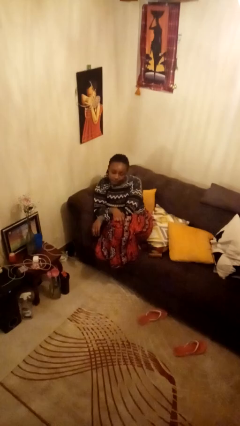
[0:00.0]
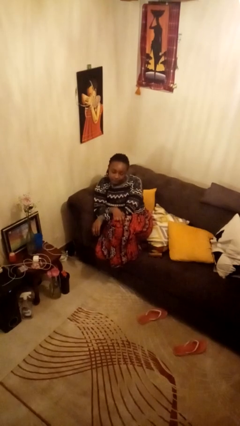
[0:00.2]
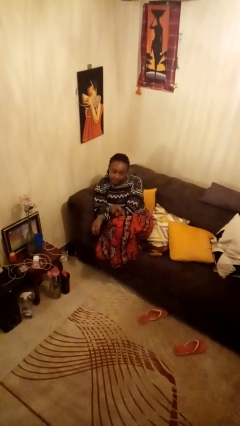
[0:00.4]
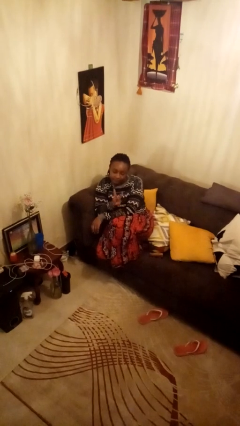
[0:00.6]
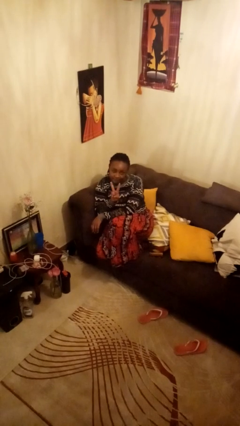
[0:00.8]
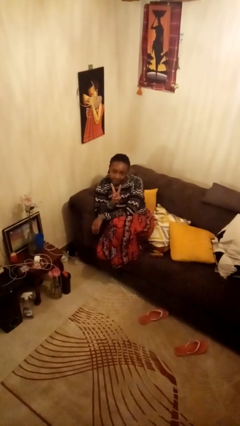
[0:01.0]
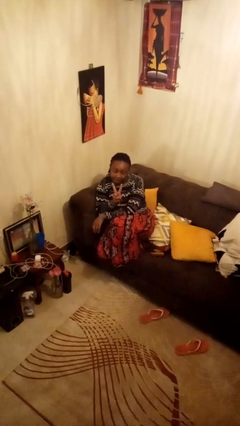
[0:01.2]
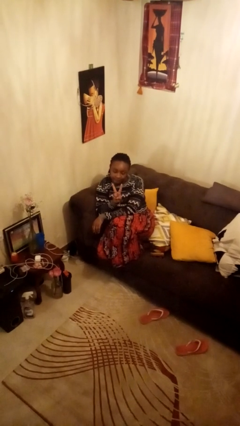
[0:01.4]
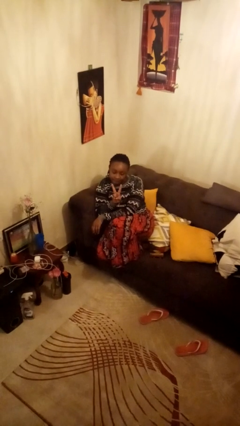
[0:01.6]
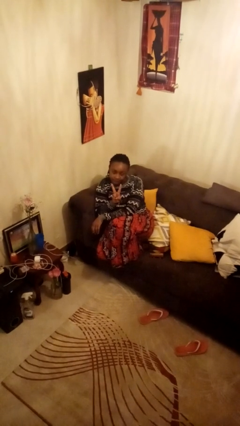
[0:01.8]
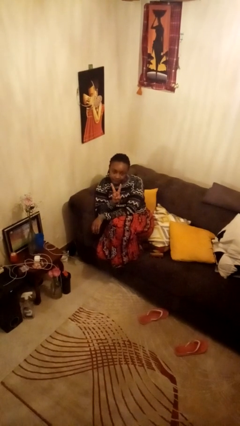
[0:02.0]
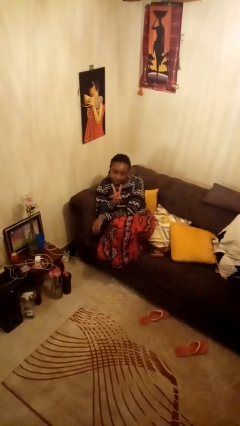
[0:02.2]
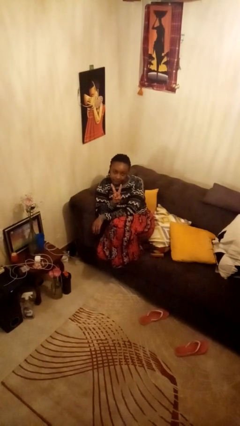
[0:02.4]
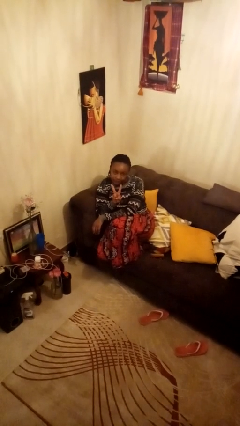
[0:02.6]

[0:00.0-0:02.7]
person gestures peace

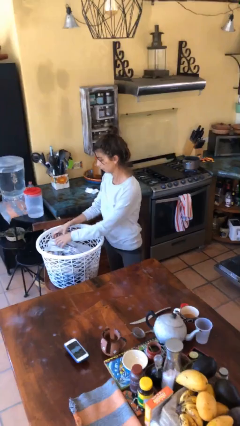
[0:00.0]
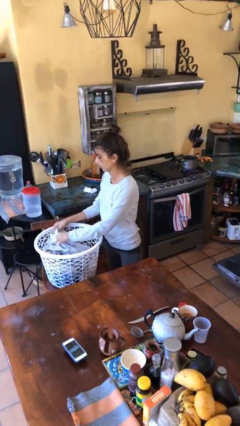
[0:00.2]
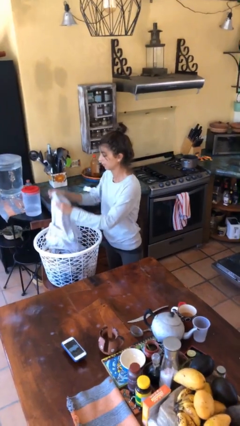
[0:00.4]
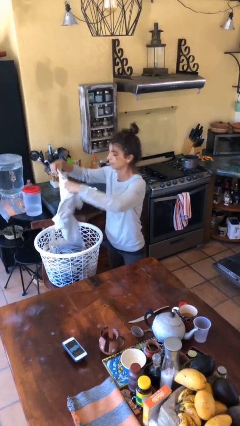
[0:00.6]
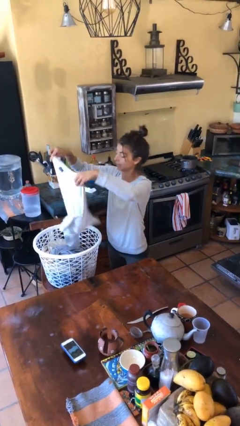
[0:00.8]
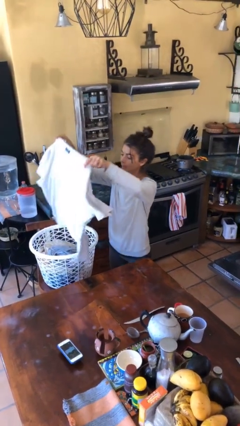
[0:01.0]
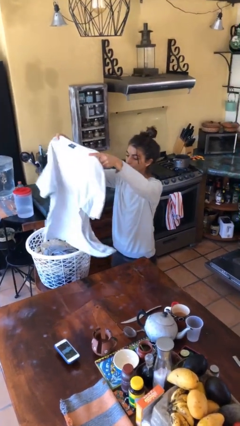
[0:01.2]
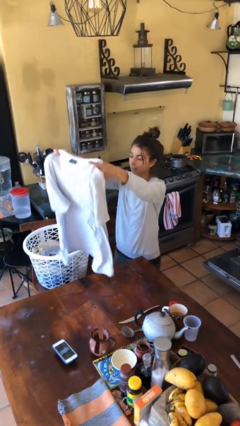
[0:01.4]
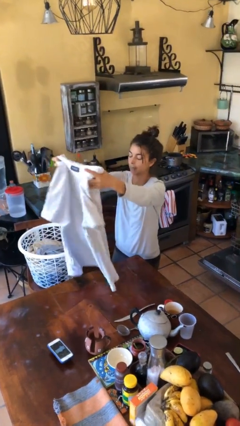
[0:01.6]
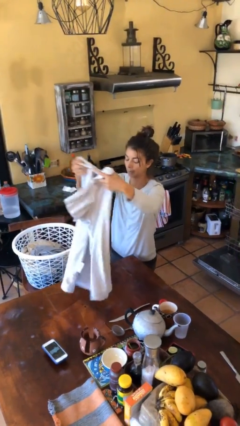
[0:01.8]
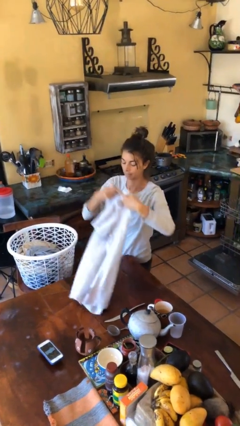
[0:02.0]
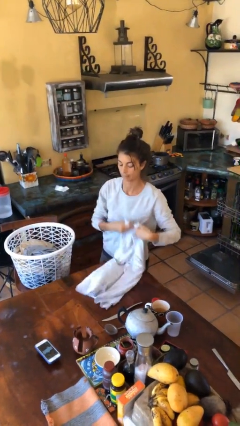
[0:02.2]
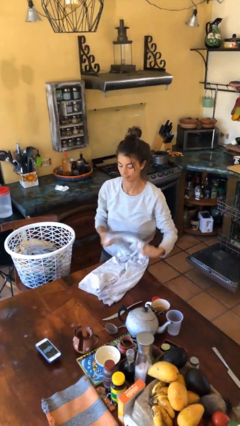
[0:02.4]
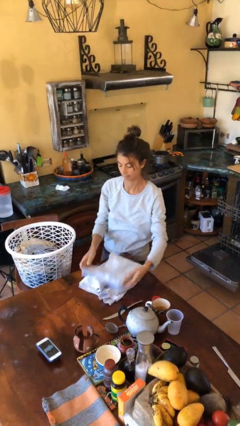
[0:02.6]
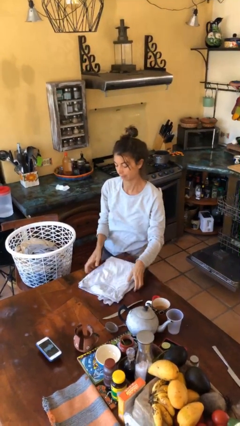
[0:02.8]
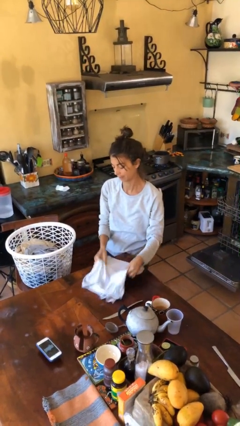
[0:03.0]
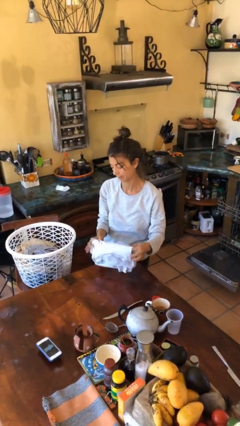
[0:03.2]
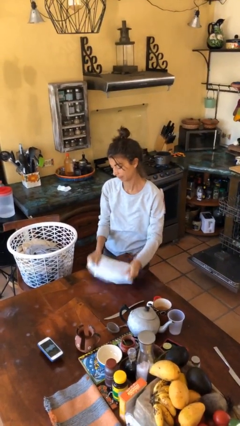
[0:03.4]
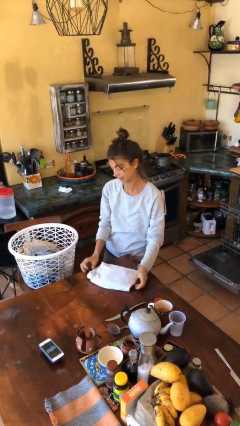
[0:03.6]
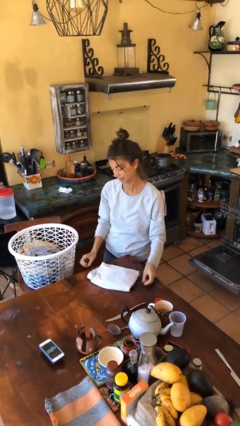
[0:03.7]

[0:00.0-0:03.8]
person folds shirt

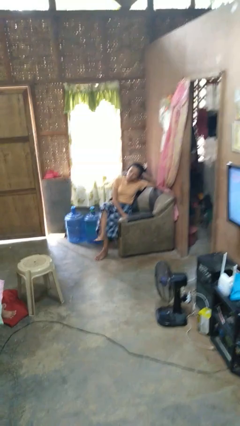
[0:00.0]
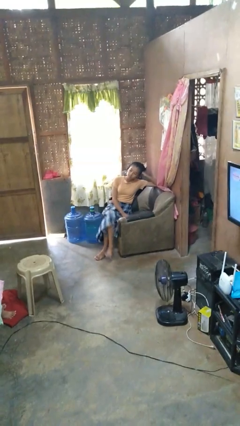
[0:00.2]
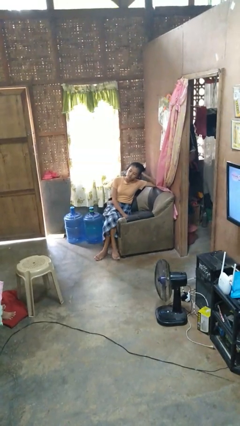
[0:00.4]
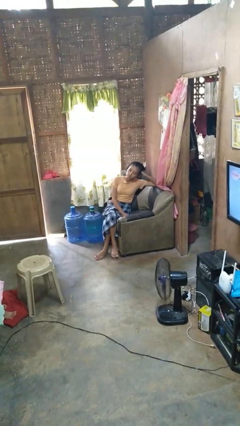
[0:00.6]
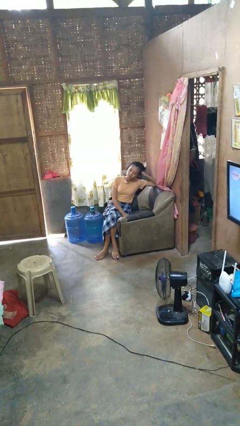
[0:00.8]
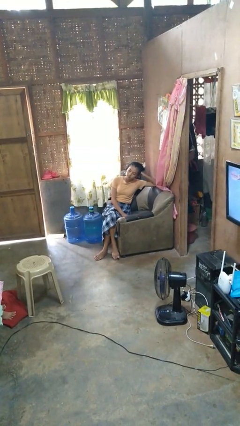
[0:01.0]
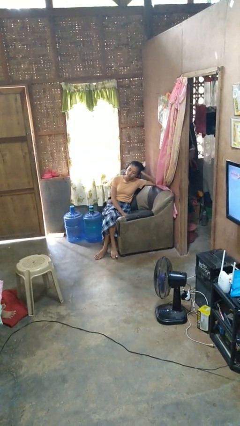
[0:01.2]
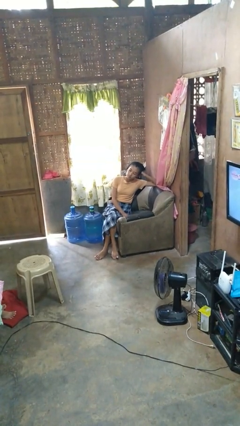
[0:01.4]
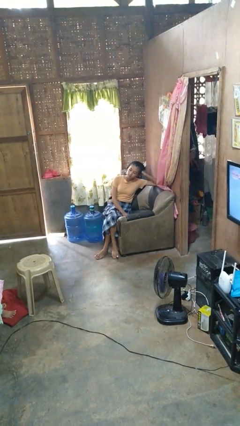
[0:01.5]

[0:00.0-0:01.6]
person crosses legs

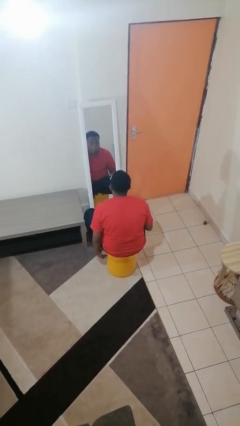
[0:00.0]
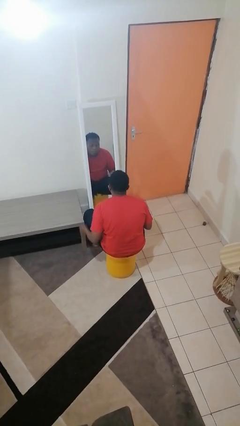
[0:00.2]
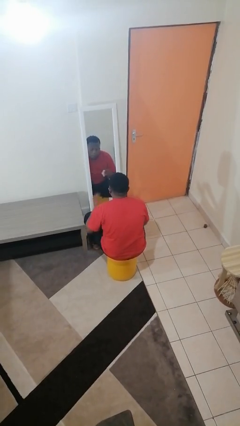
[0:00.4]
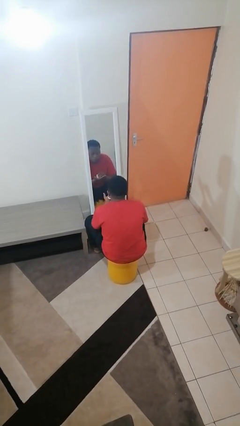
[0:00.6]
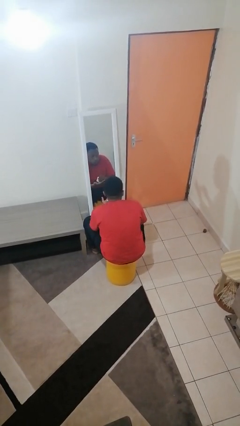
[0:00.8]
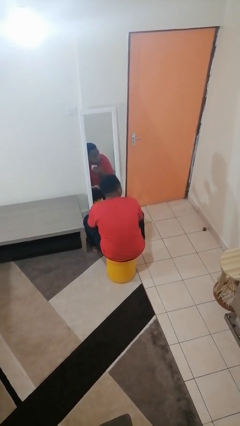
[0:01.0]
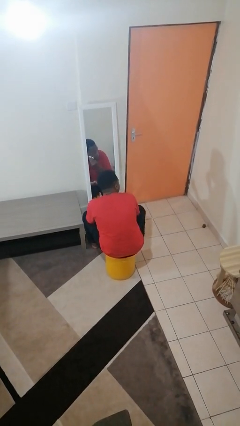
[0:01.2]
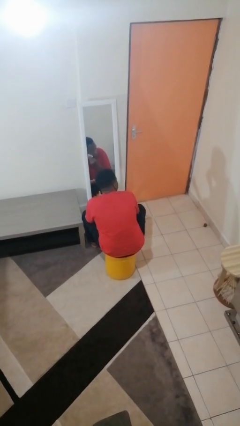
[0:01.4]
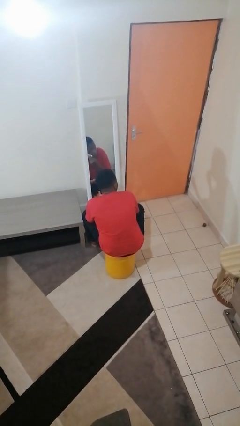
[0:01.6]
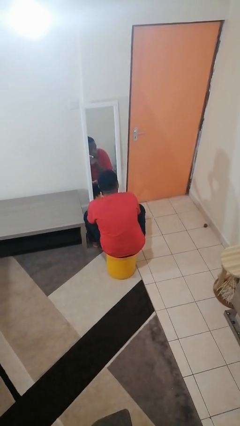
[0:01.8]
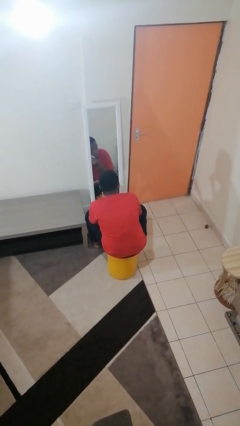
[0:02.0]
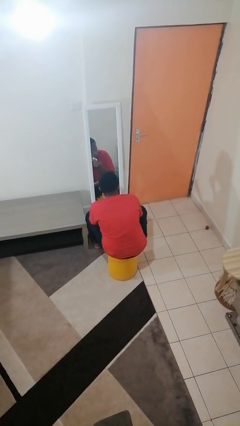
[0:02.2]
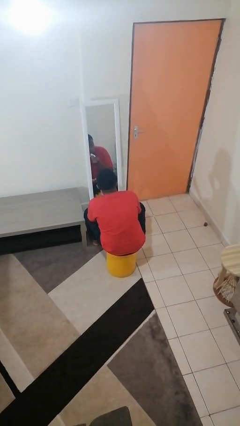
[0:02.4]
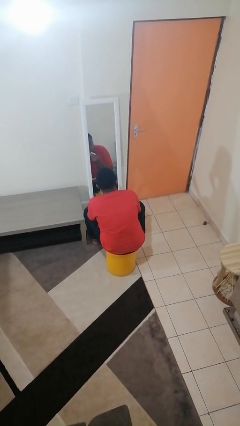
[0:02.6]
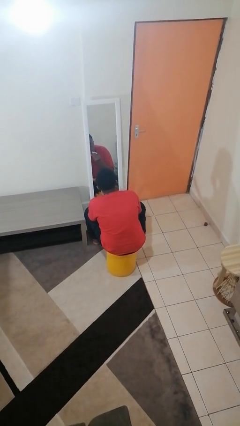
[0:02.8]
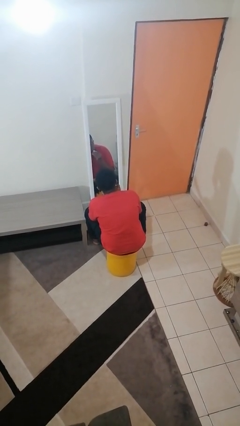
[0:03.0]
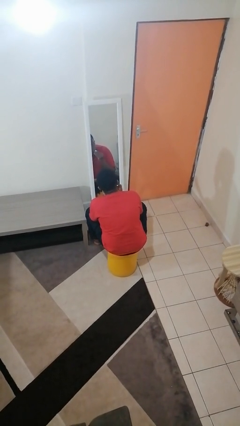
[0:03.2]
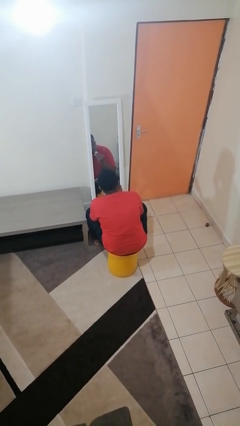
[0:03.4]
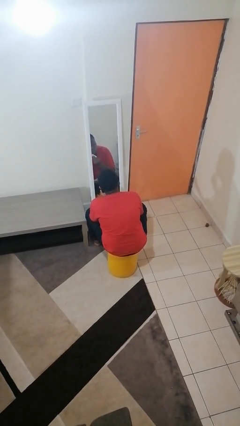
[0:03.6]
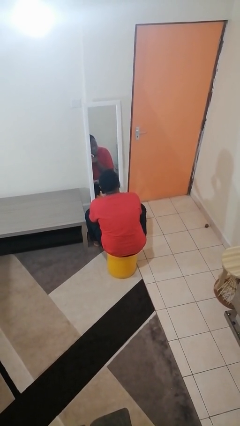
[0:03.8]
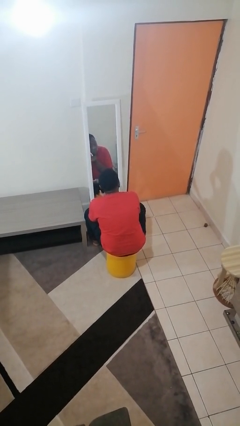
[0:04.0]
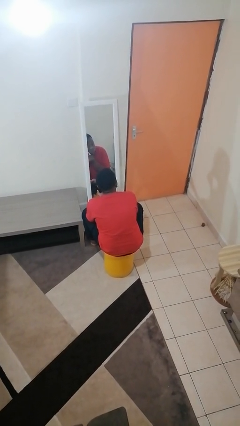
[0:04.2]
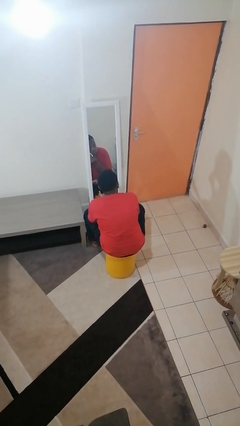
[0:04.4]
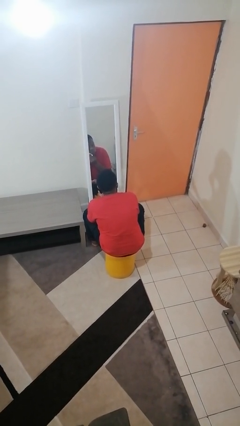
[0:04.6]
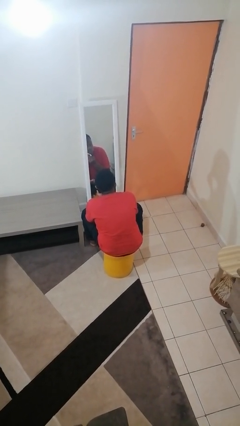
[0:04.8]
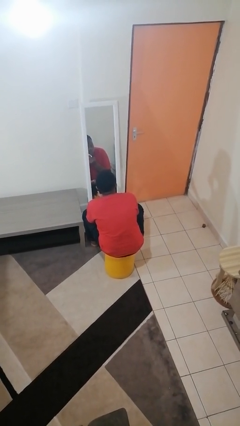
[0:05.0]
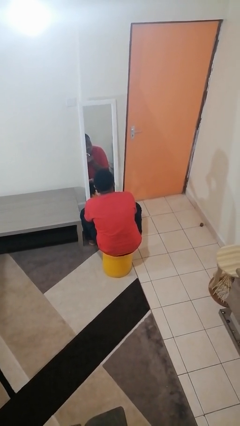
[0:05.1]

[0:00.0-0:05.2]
person applies foundation makeup

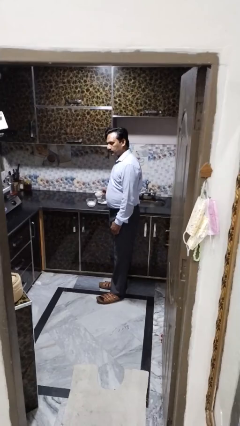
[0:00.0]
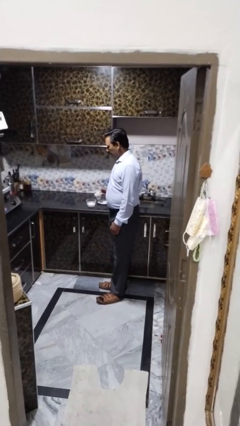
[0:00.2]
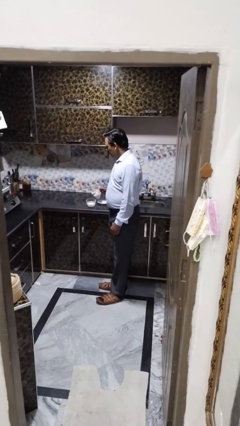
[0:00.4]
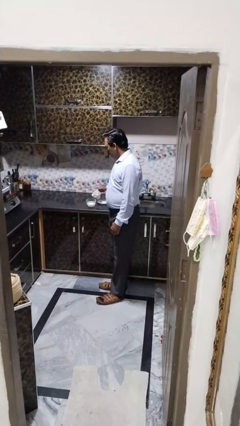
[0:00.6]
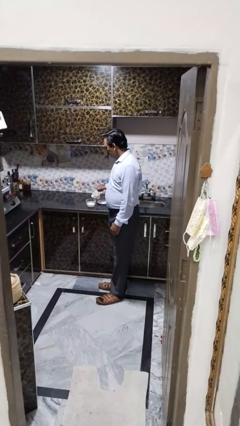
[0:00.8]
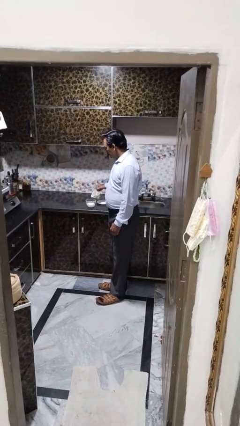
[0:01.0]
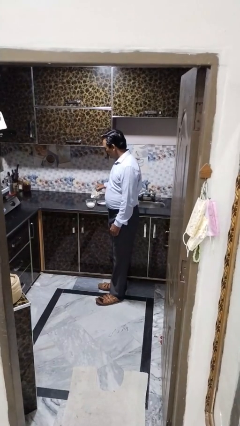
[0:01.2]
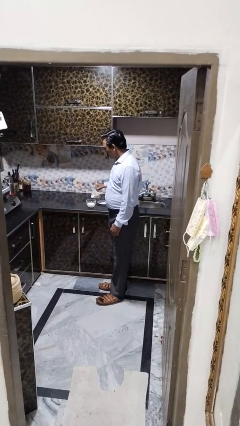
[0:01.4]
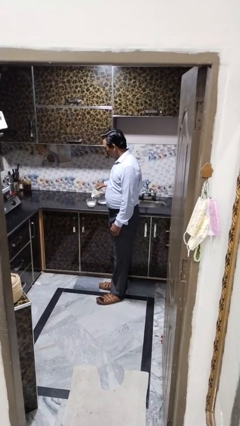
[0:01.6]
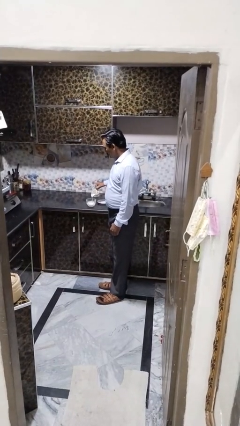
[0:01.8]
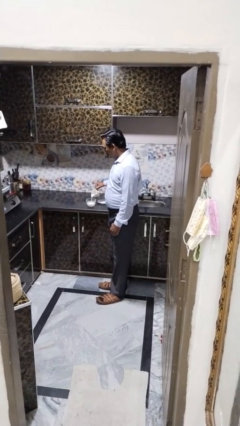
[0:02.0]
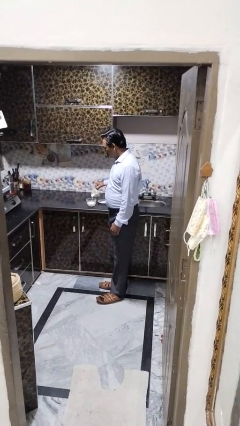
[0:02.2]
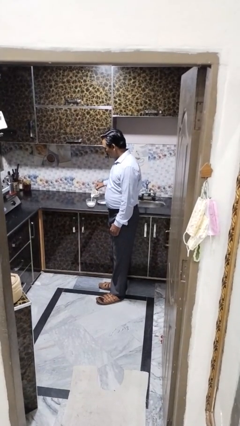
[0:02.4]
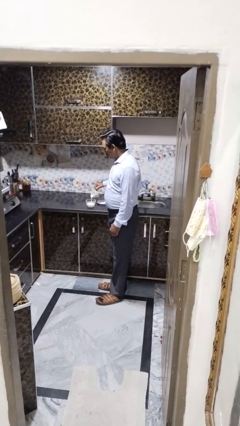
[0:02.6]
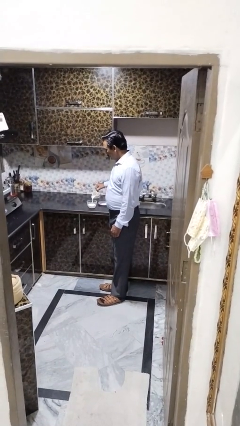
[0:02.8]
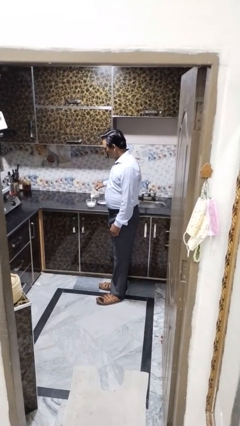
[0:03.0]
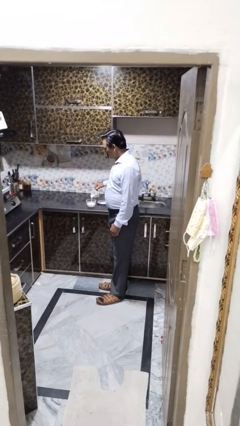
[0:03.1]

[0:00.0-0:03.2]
person pours into bowl

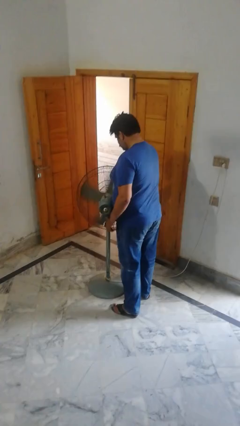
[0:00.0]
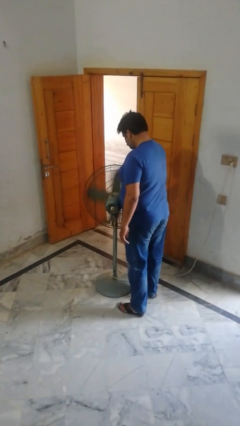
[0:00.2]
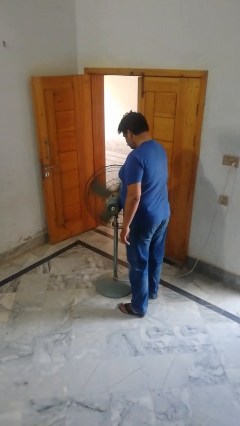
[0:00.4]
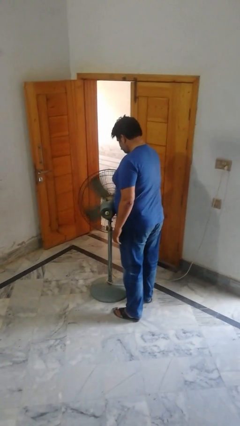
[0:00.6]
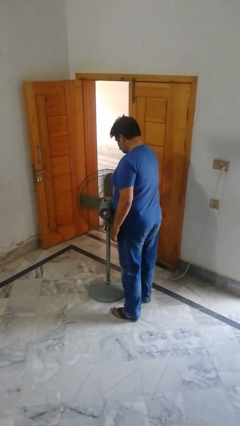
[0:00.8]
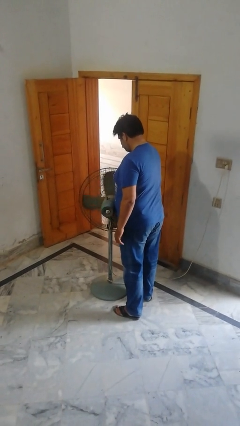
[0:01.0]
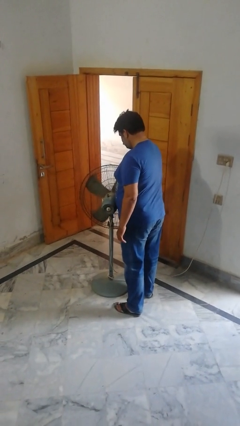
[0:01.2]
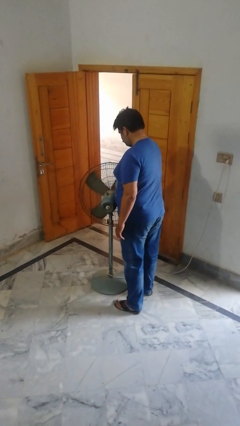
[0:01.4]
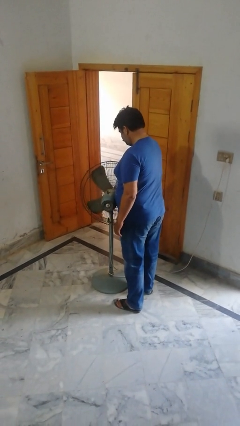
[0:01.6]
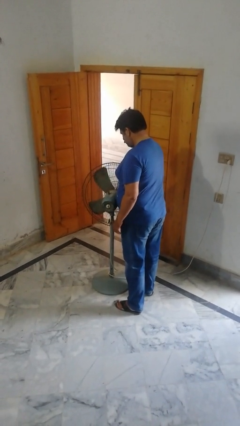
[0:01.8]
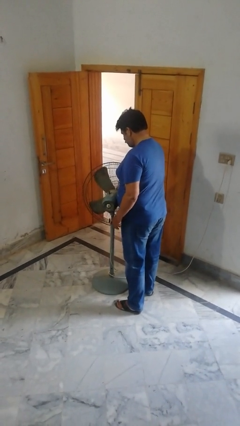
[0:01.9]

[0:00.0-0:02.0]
person turns off fan
